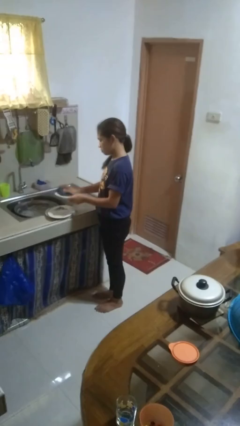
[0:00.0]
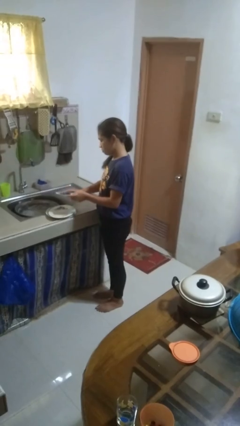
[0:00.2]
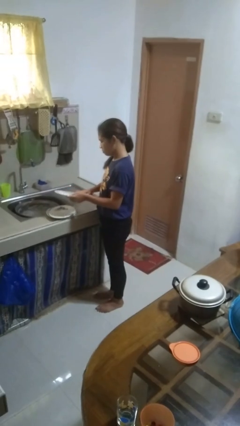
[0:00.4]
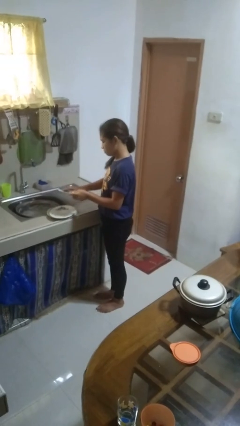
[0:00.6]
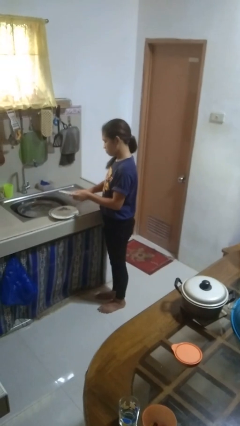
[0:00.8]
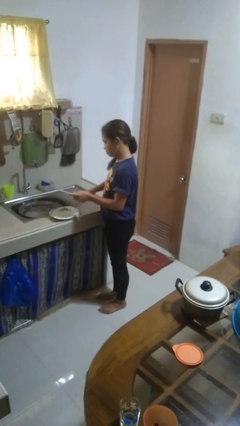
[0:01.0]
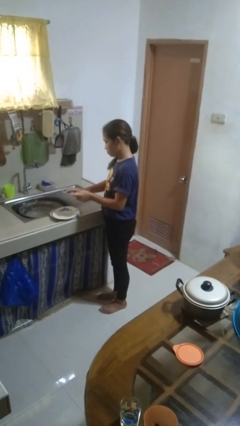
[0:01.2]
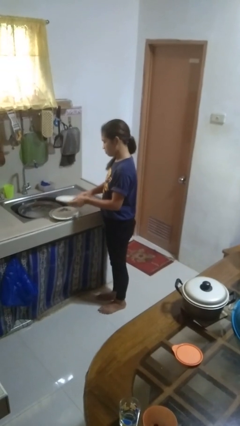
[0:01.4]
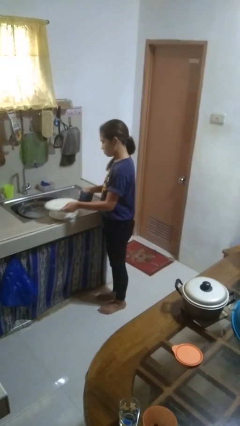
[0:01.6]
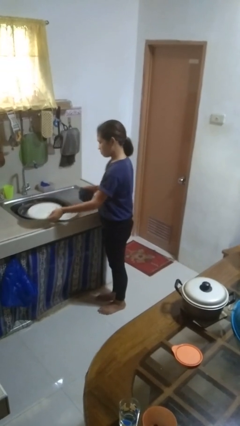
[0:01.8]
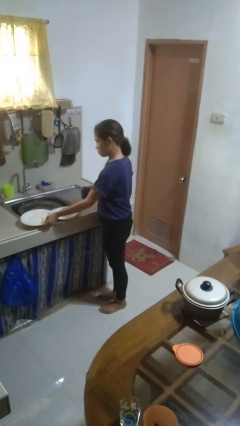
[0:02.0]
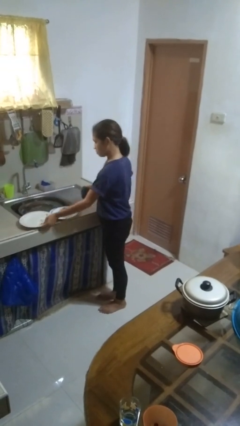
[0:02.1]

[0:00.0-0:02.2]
person dries dish

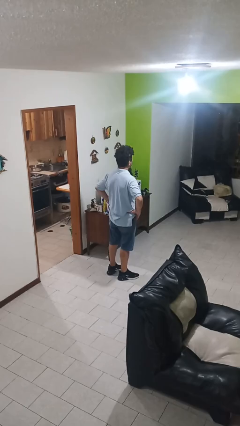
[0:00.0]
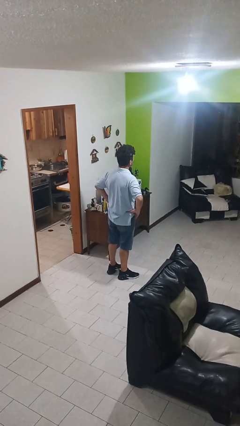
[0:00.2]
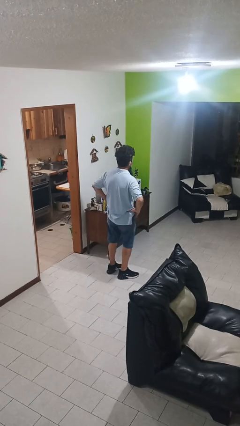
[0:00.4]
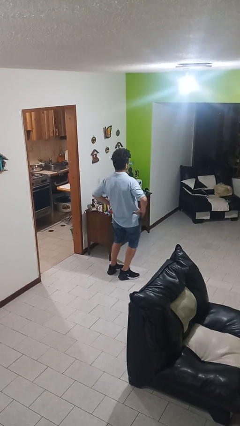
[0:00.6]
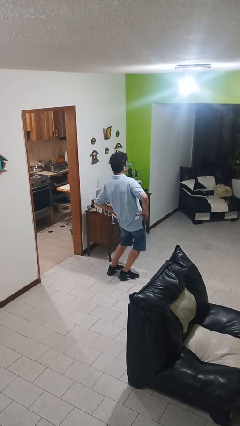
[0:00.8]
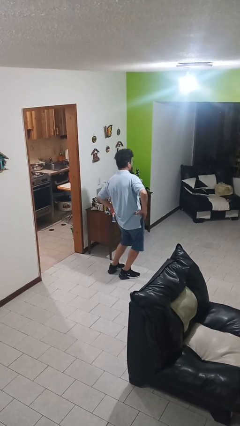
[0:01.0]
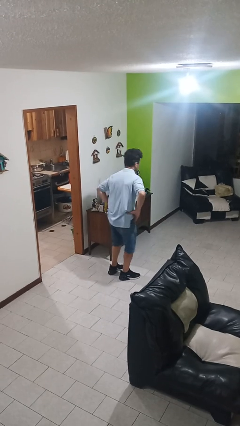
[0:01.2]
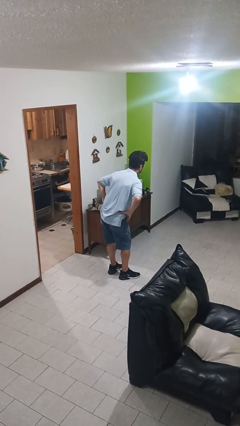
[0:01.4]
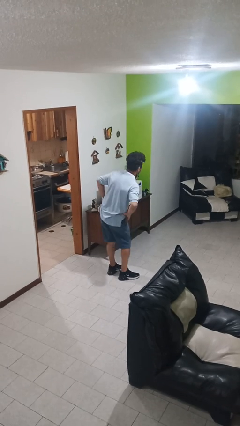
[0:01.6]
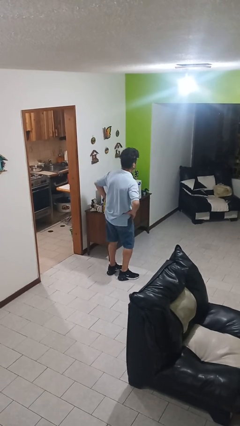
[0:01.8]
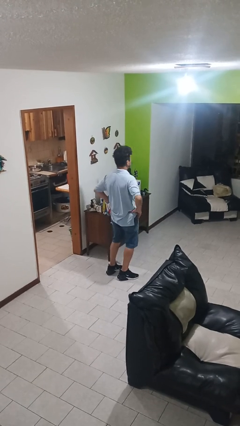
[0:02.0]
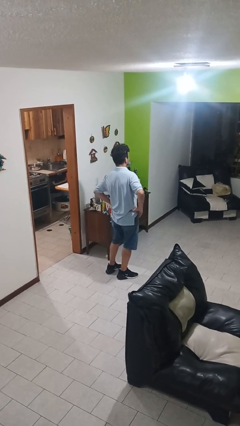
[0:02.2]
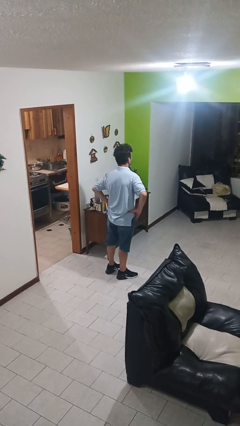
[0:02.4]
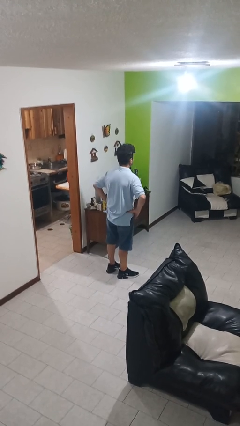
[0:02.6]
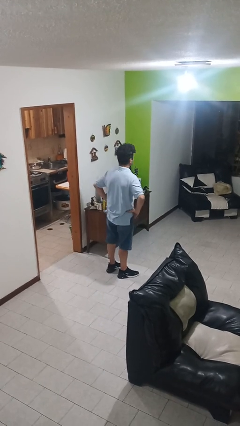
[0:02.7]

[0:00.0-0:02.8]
person wiggles hips

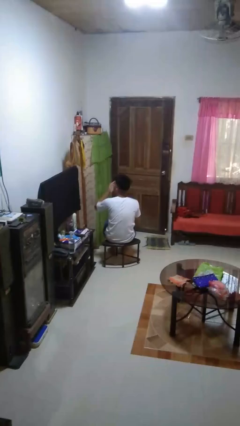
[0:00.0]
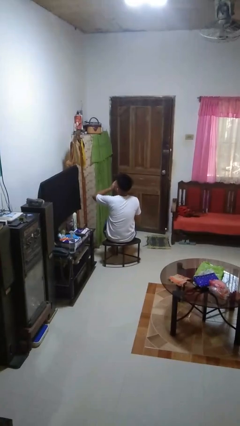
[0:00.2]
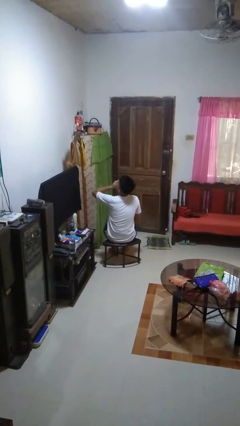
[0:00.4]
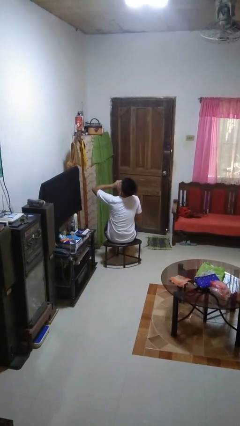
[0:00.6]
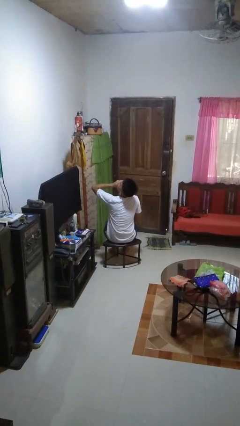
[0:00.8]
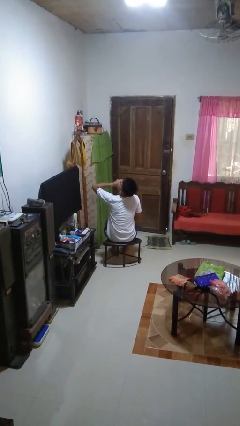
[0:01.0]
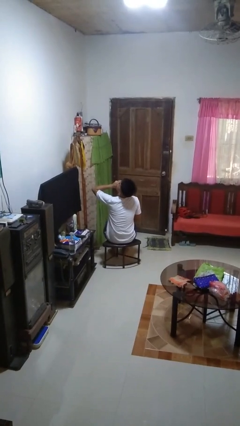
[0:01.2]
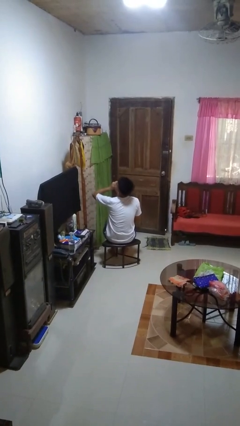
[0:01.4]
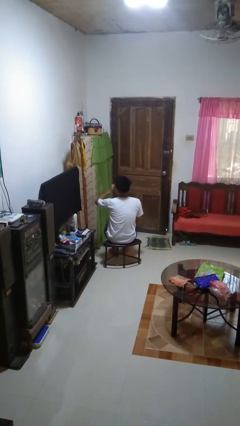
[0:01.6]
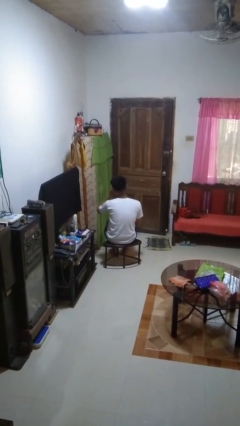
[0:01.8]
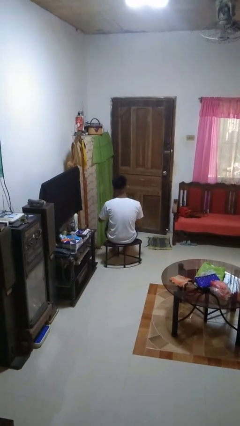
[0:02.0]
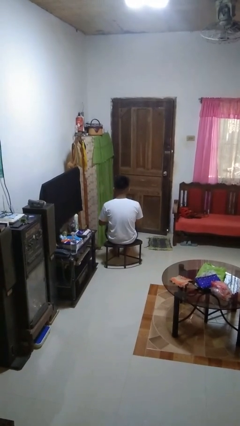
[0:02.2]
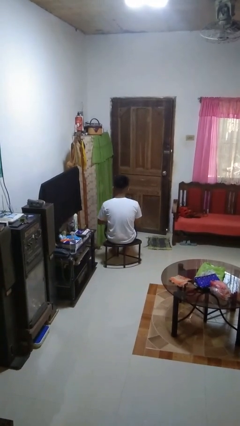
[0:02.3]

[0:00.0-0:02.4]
person yawns

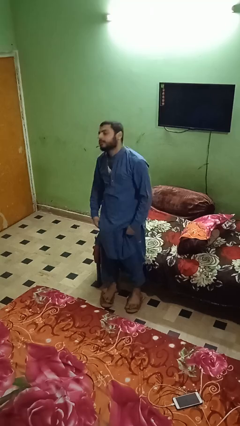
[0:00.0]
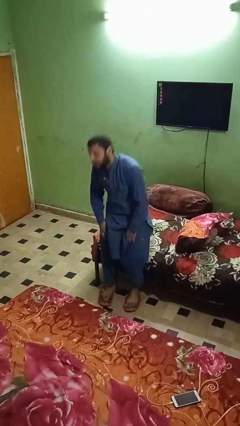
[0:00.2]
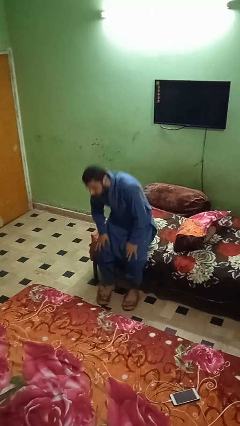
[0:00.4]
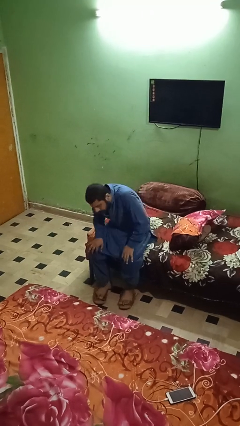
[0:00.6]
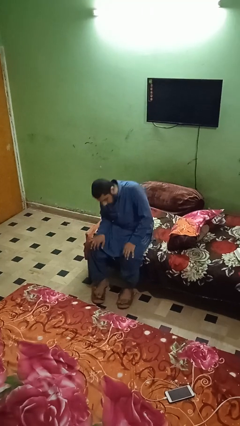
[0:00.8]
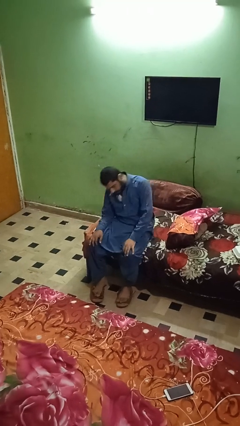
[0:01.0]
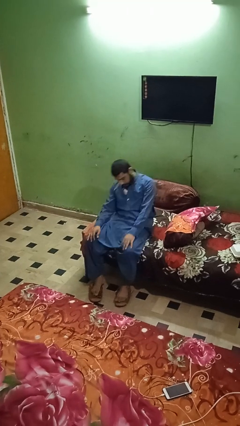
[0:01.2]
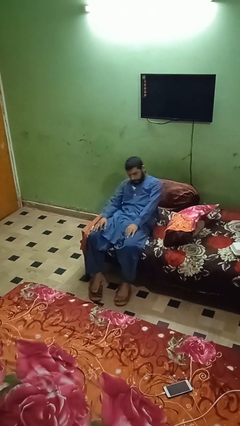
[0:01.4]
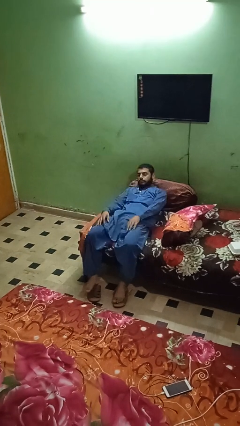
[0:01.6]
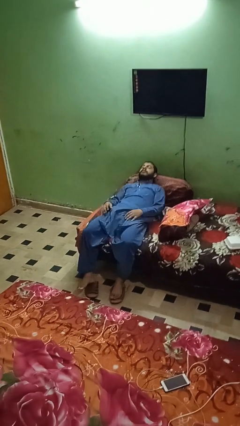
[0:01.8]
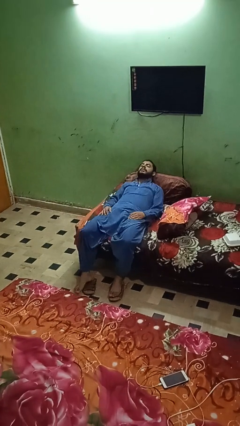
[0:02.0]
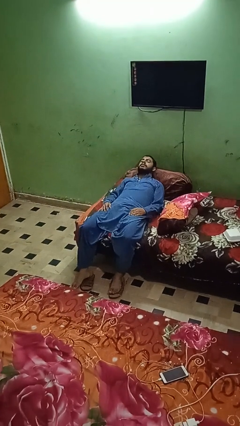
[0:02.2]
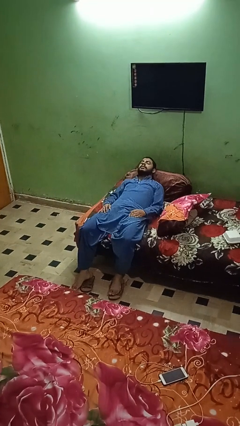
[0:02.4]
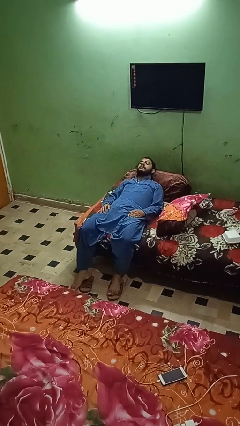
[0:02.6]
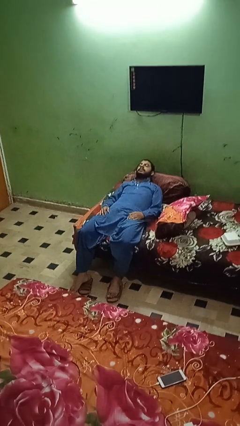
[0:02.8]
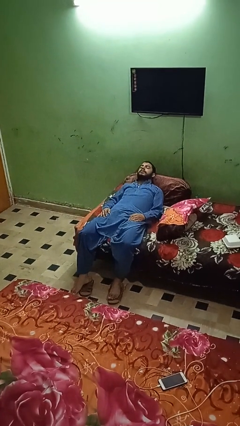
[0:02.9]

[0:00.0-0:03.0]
person lies down on couch

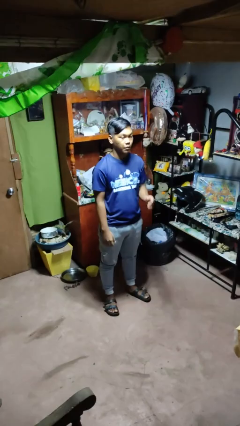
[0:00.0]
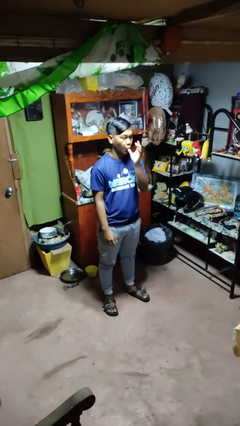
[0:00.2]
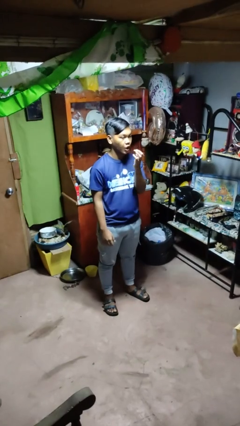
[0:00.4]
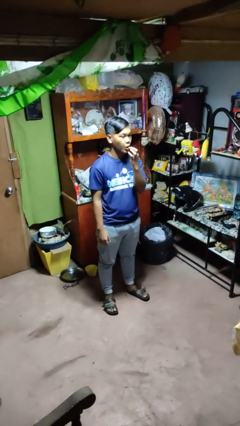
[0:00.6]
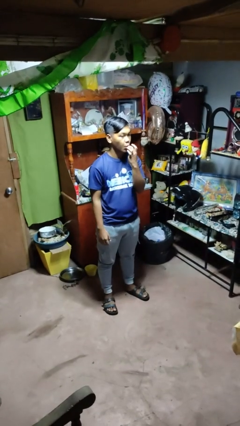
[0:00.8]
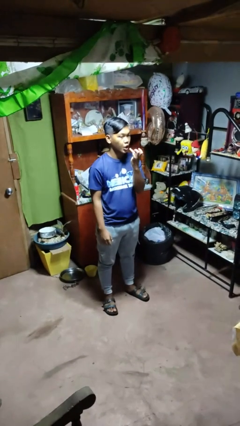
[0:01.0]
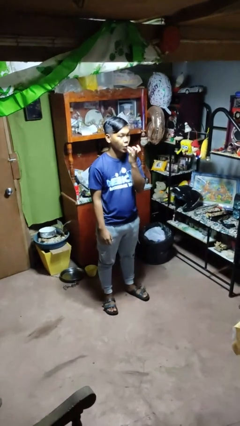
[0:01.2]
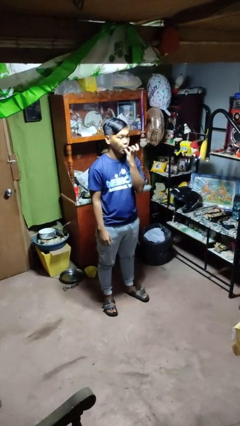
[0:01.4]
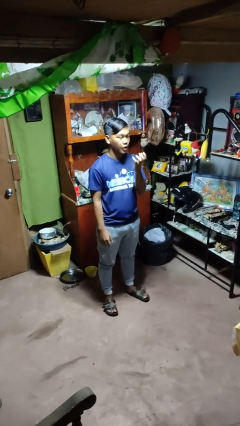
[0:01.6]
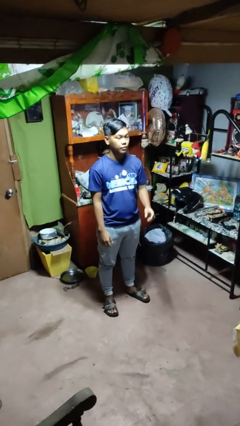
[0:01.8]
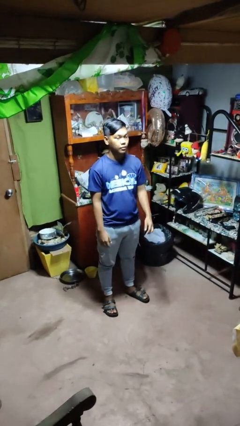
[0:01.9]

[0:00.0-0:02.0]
person licks fingers

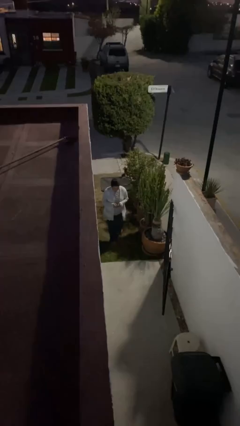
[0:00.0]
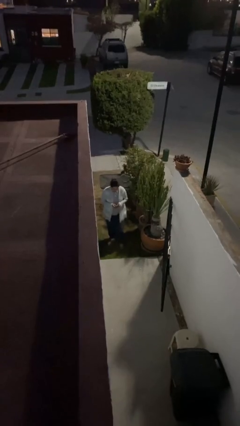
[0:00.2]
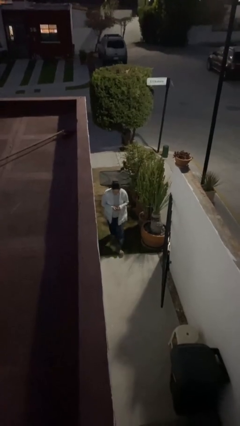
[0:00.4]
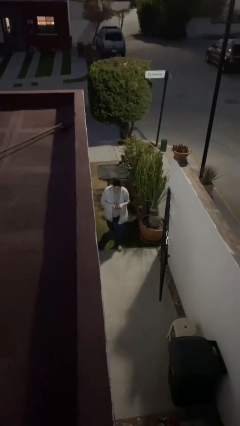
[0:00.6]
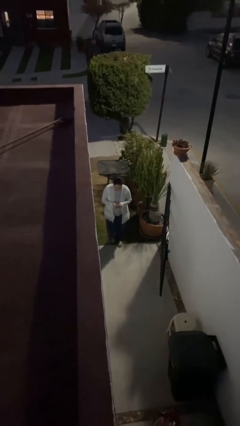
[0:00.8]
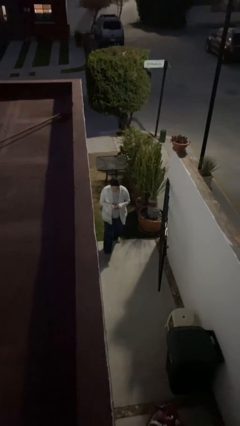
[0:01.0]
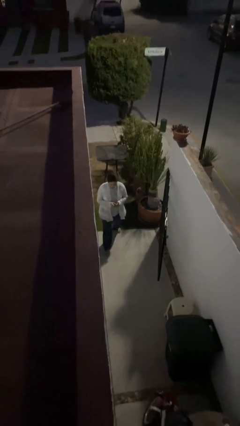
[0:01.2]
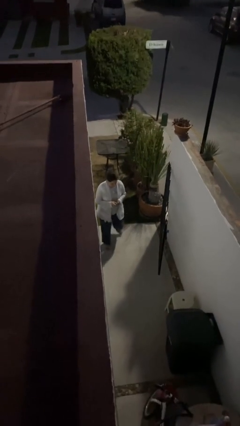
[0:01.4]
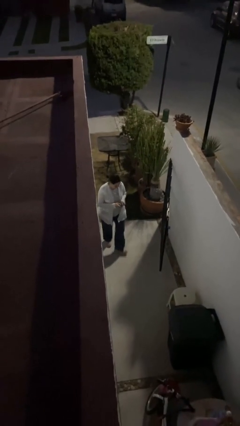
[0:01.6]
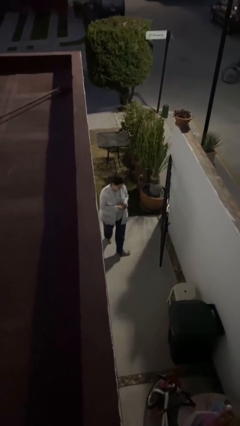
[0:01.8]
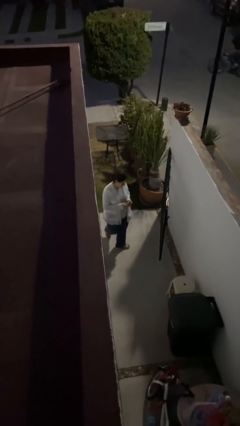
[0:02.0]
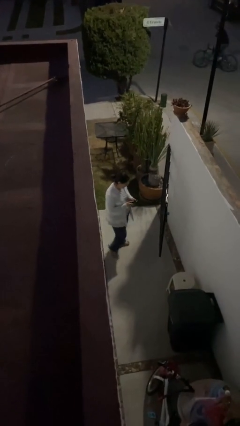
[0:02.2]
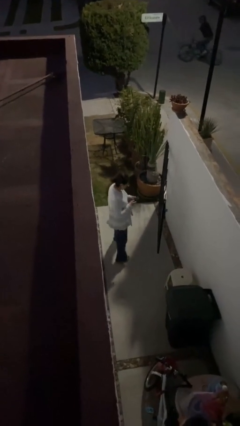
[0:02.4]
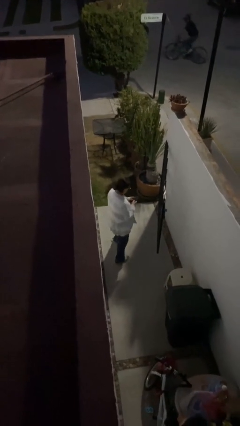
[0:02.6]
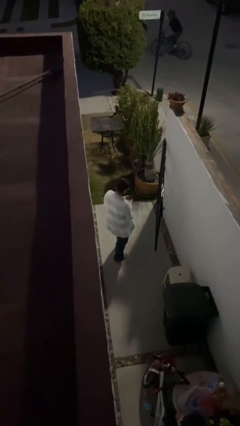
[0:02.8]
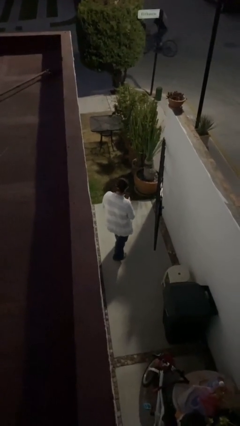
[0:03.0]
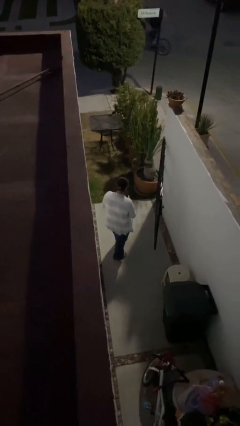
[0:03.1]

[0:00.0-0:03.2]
person enters scene through structure

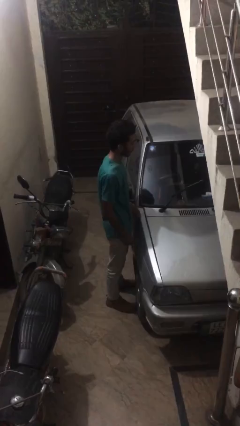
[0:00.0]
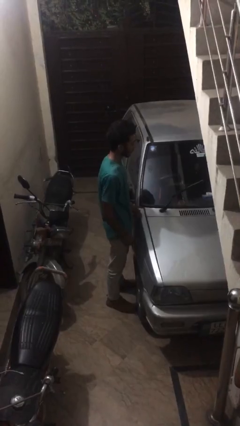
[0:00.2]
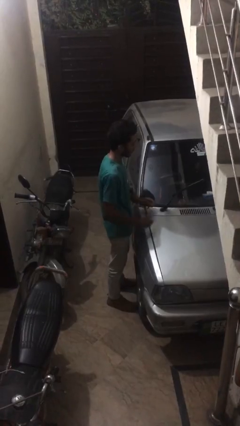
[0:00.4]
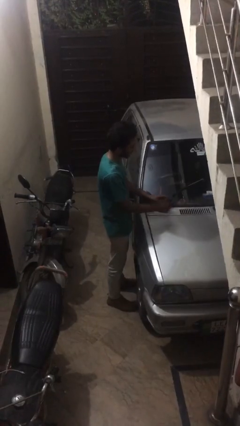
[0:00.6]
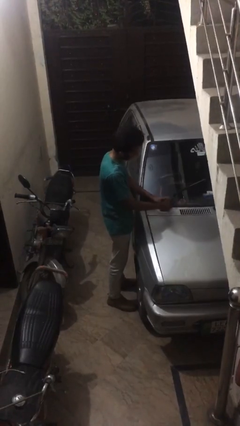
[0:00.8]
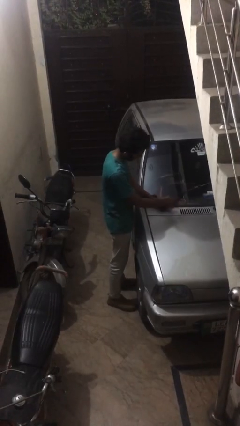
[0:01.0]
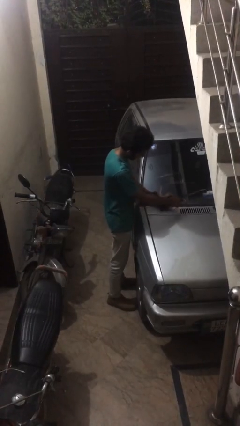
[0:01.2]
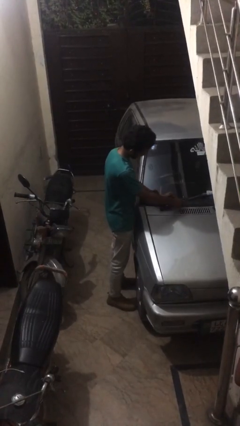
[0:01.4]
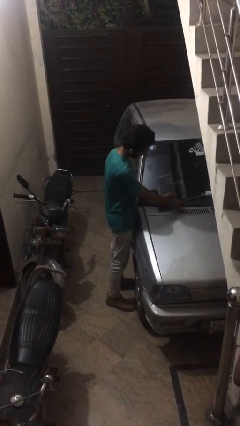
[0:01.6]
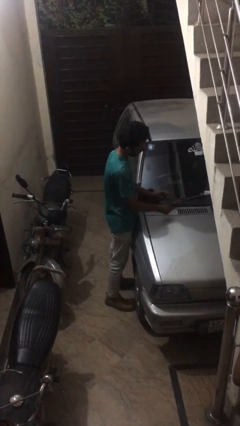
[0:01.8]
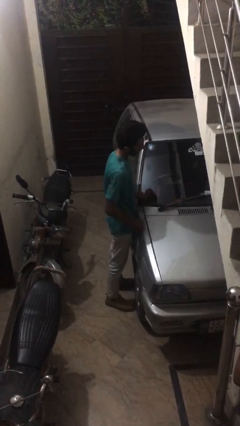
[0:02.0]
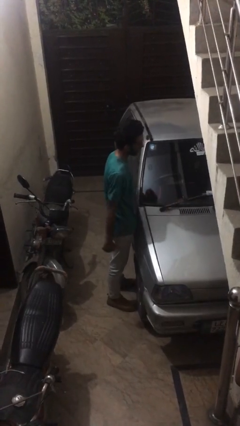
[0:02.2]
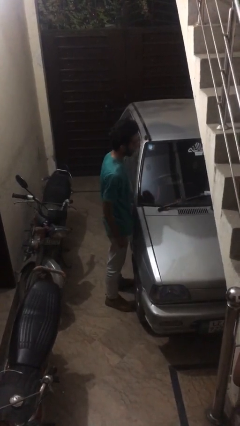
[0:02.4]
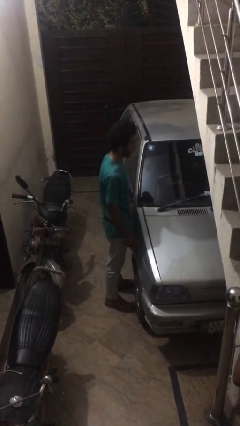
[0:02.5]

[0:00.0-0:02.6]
person flips down car wipers
